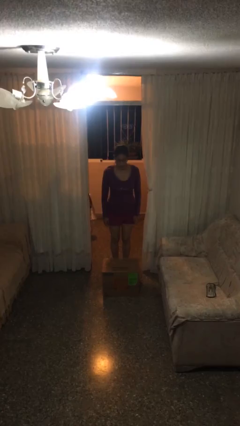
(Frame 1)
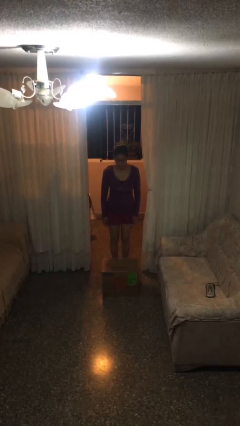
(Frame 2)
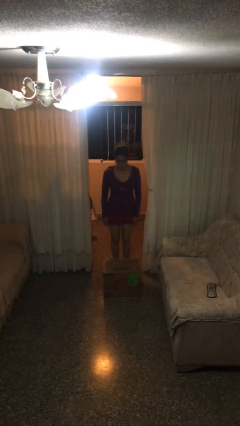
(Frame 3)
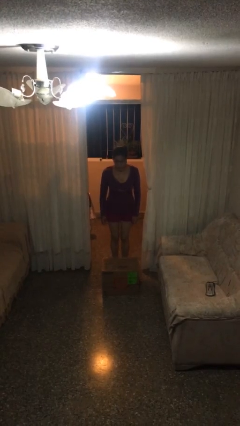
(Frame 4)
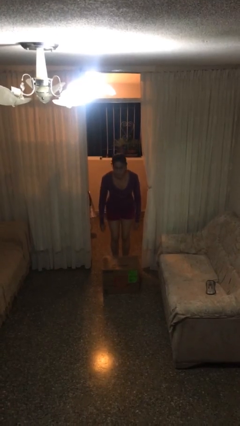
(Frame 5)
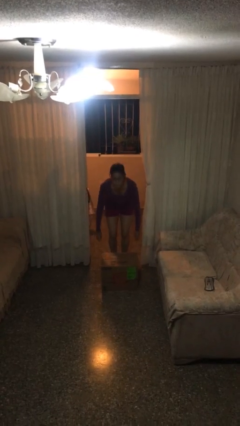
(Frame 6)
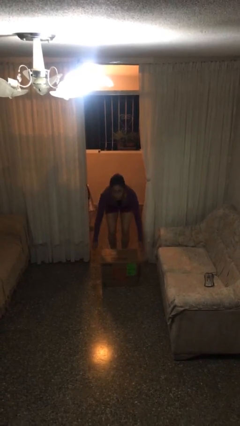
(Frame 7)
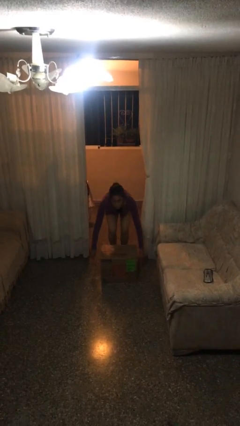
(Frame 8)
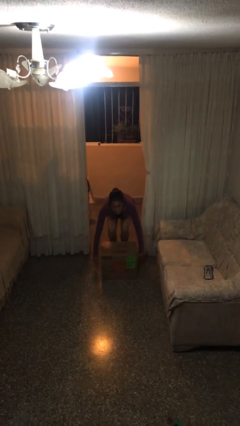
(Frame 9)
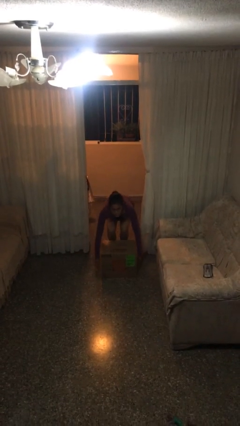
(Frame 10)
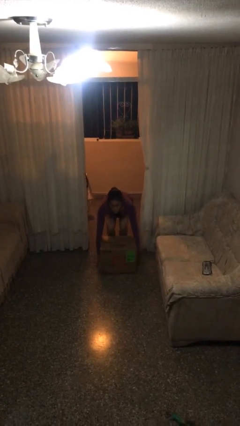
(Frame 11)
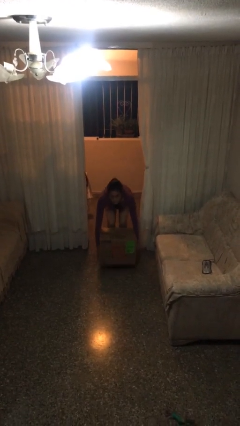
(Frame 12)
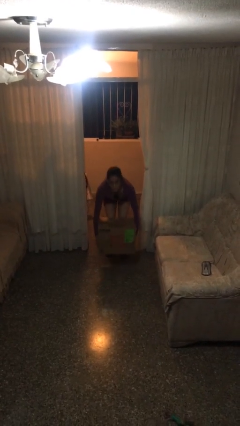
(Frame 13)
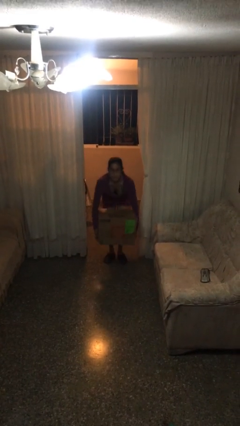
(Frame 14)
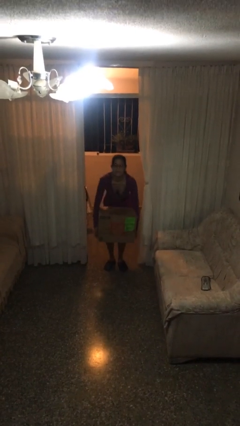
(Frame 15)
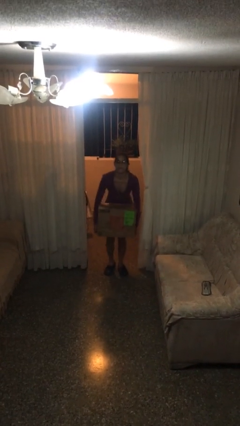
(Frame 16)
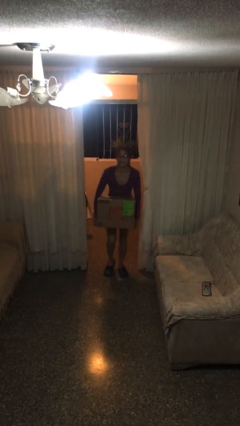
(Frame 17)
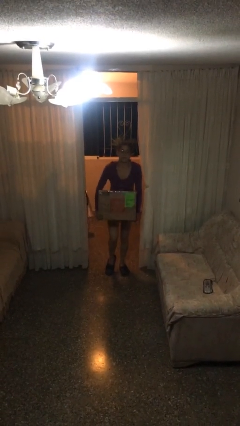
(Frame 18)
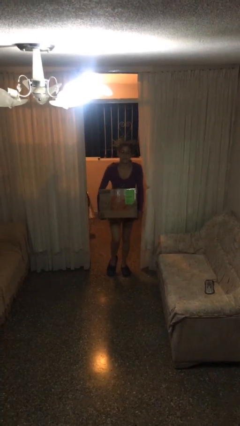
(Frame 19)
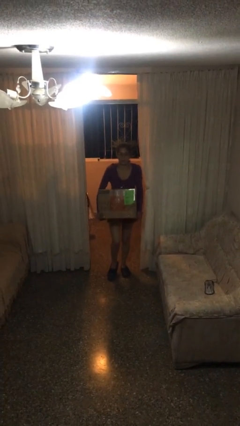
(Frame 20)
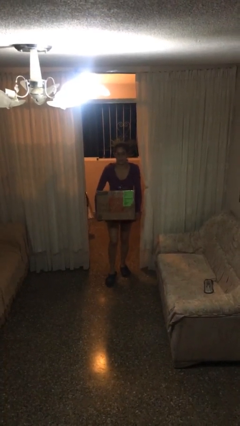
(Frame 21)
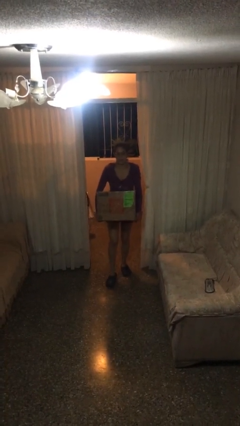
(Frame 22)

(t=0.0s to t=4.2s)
person picks up object from floor

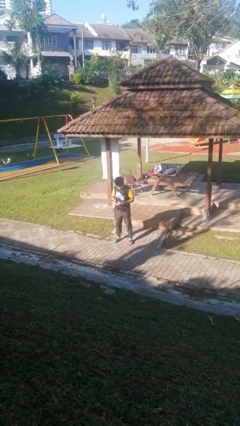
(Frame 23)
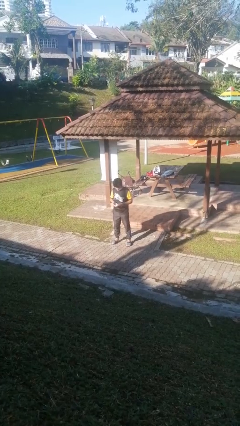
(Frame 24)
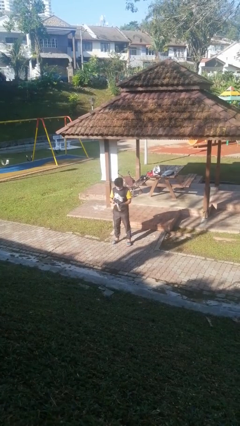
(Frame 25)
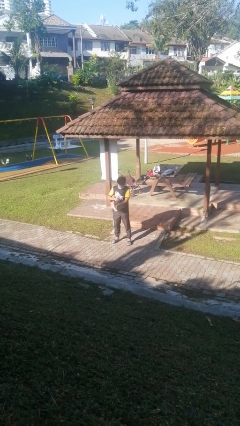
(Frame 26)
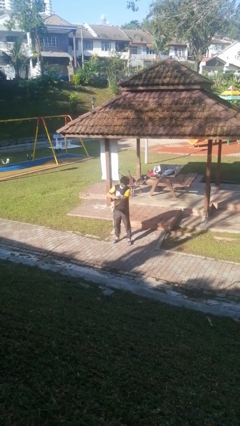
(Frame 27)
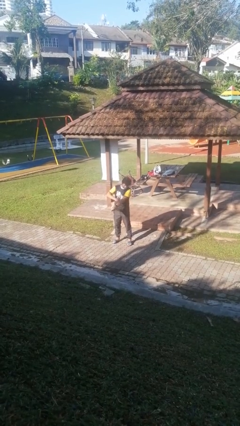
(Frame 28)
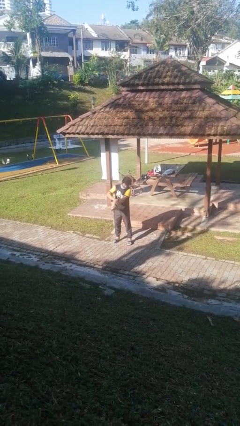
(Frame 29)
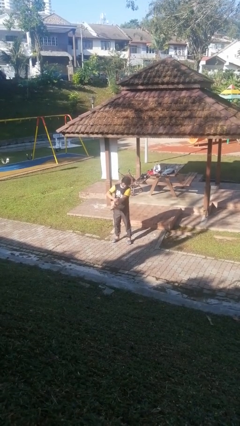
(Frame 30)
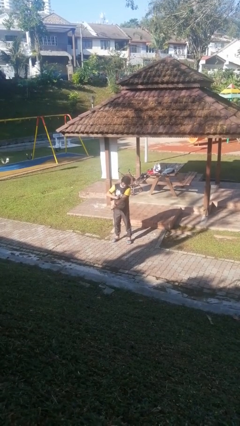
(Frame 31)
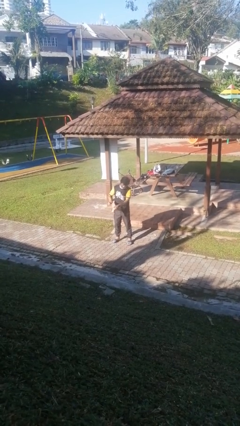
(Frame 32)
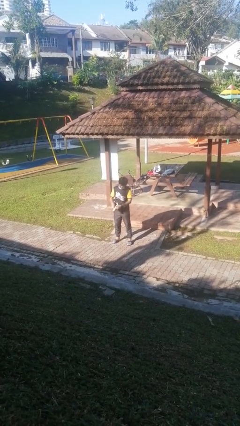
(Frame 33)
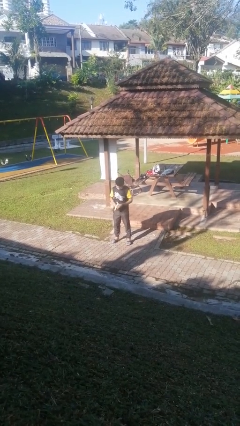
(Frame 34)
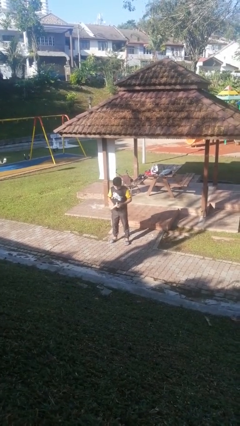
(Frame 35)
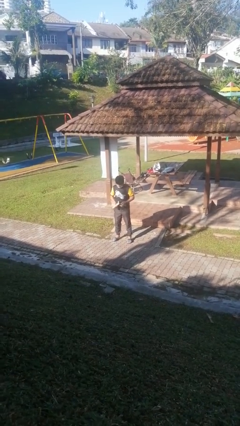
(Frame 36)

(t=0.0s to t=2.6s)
person applies sunscreen

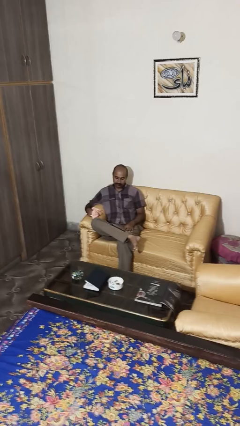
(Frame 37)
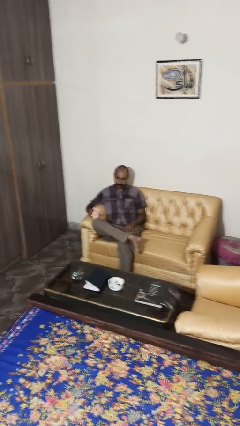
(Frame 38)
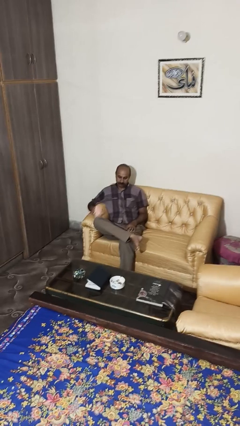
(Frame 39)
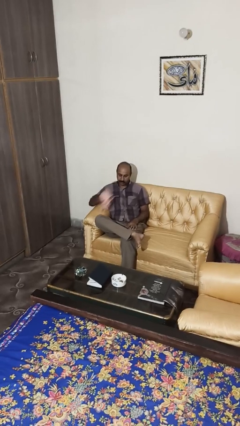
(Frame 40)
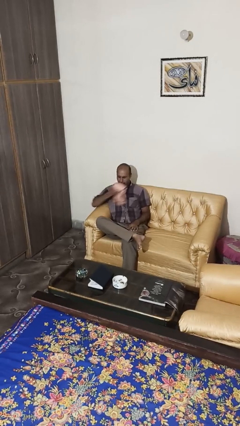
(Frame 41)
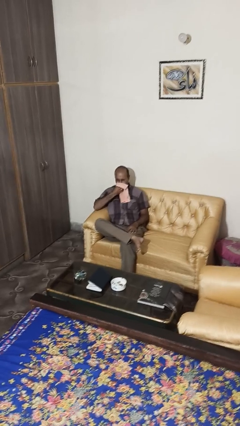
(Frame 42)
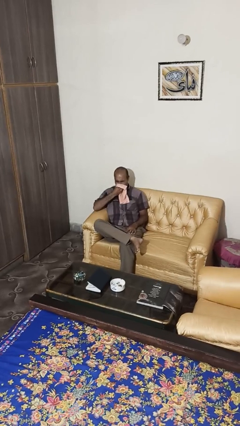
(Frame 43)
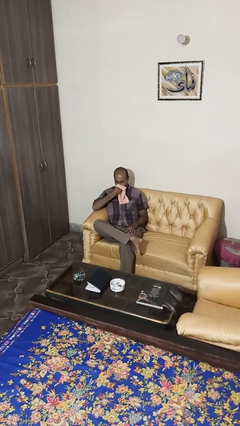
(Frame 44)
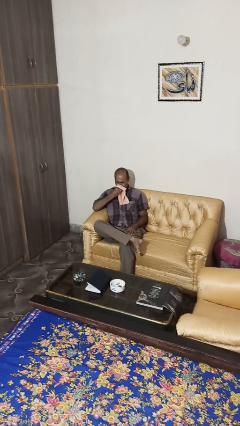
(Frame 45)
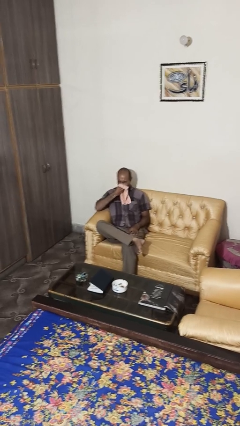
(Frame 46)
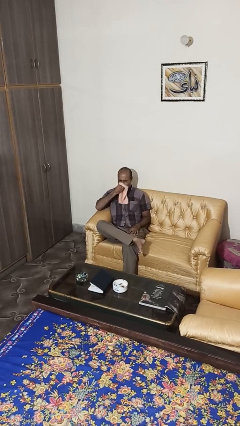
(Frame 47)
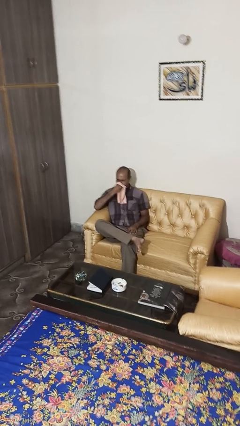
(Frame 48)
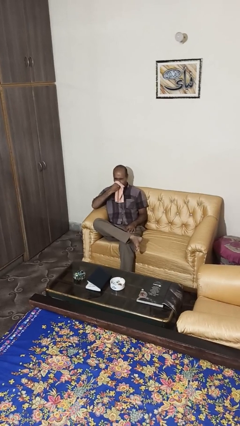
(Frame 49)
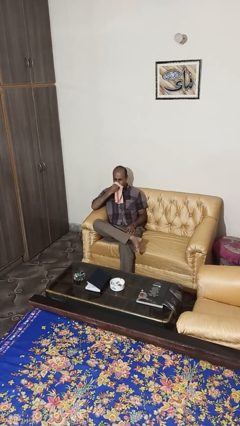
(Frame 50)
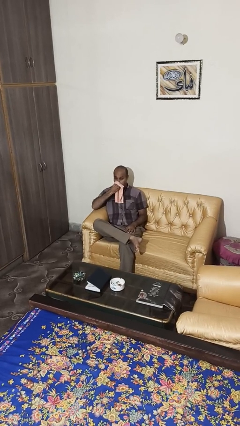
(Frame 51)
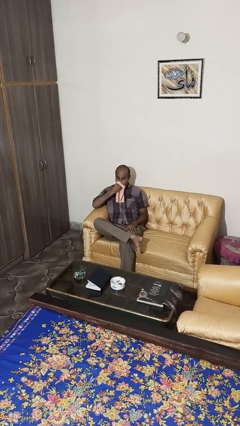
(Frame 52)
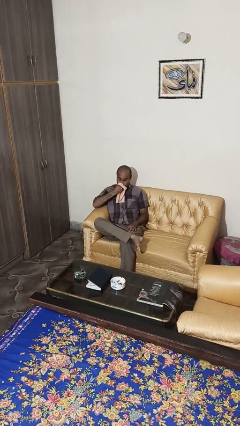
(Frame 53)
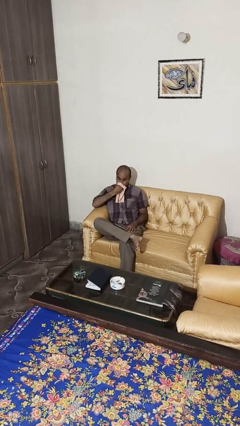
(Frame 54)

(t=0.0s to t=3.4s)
person blows nose

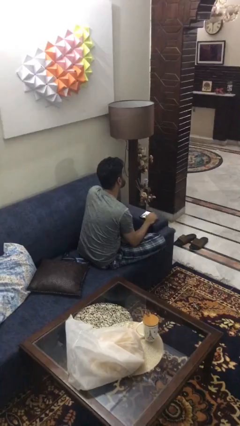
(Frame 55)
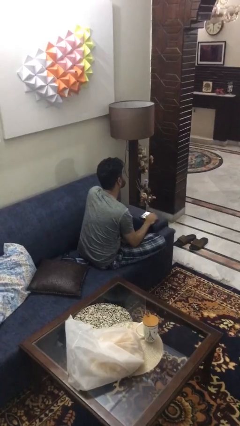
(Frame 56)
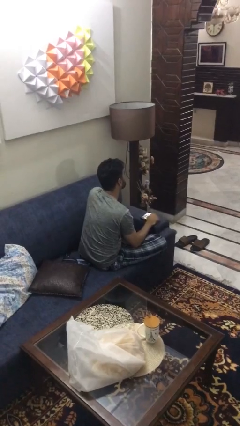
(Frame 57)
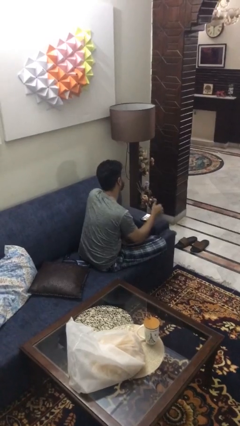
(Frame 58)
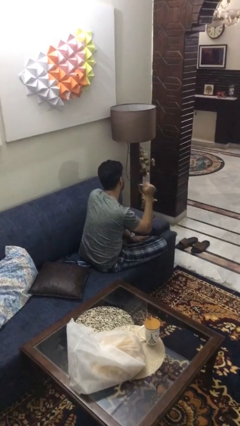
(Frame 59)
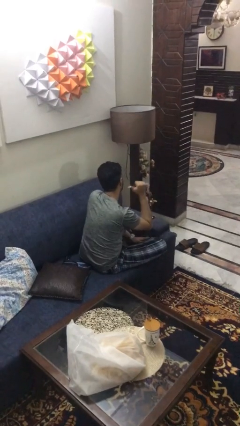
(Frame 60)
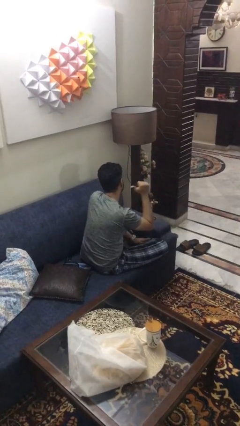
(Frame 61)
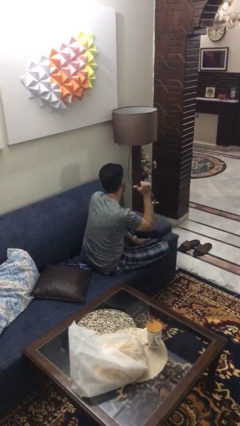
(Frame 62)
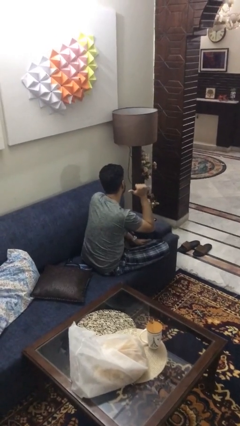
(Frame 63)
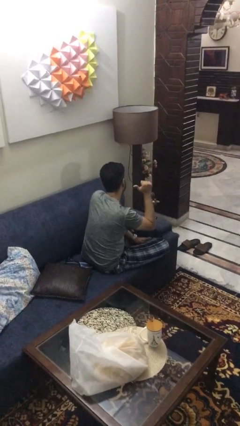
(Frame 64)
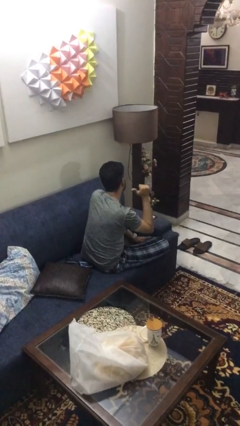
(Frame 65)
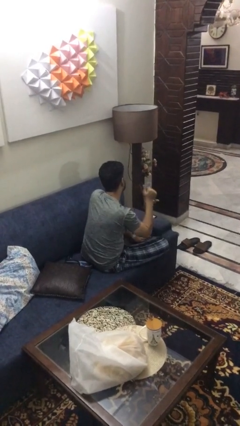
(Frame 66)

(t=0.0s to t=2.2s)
person gestures behind me

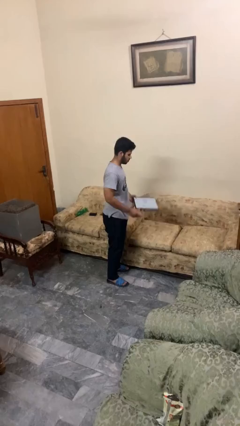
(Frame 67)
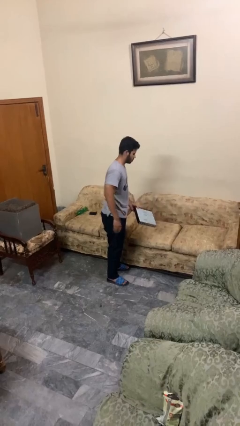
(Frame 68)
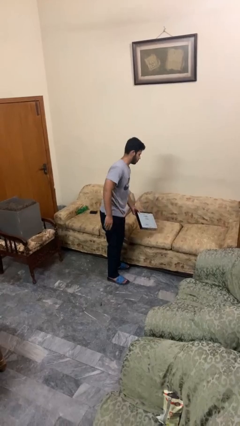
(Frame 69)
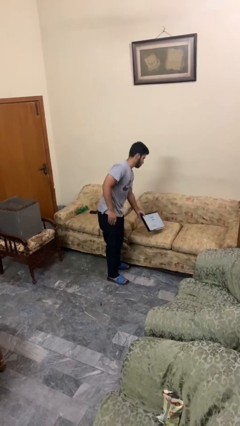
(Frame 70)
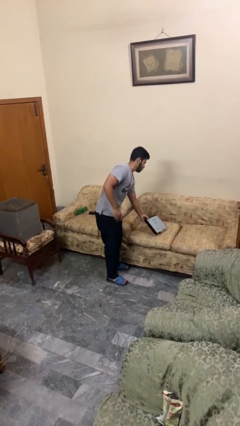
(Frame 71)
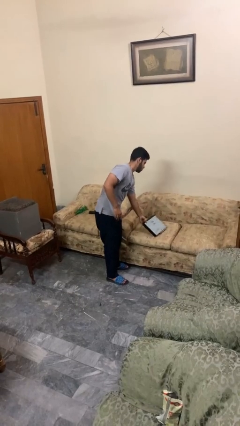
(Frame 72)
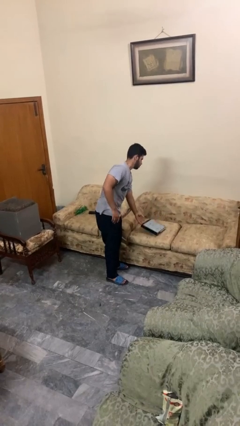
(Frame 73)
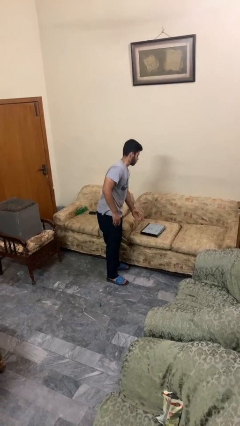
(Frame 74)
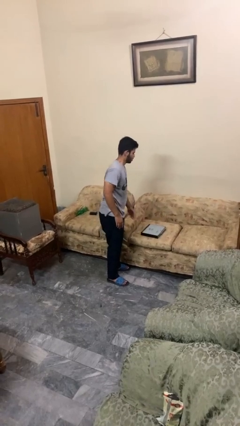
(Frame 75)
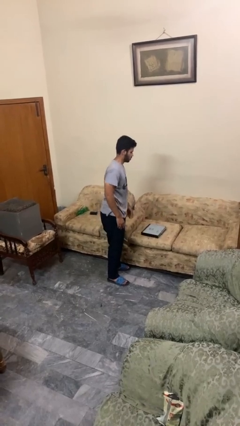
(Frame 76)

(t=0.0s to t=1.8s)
person puts down object on couch

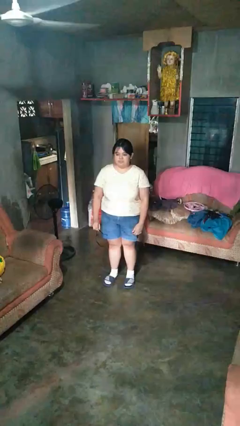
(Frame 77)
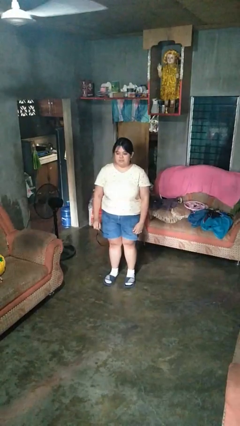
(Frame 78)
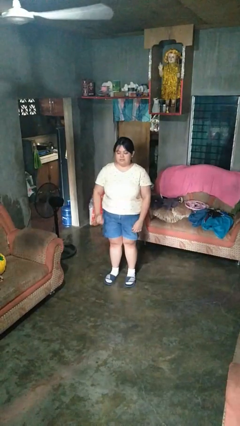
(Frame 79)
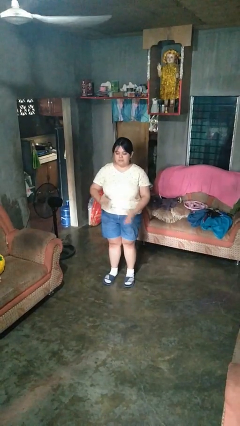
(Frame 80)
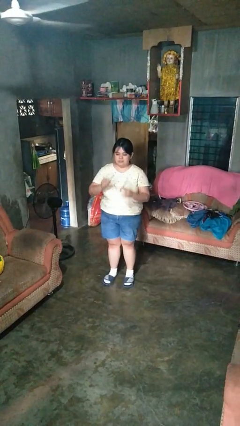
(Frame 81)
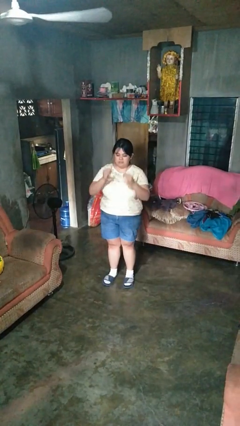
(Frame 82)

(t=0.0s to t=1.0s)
person puts on glasses

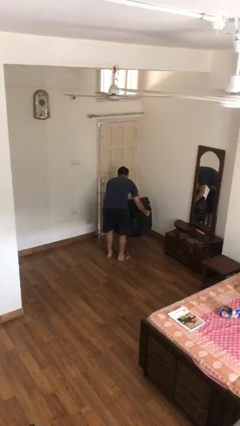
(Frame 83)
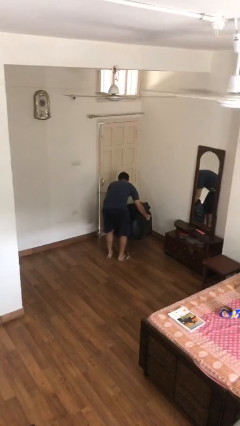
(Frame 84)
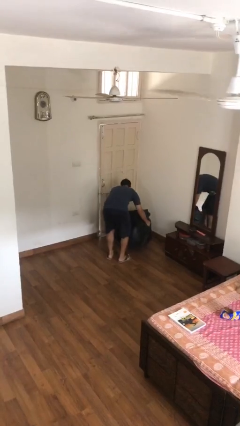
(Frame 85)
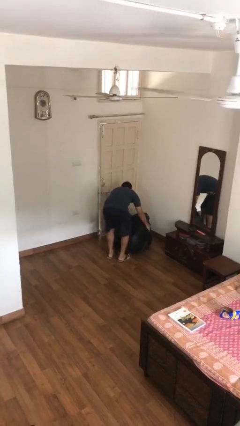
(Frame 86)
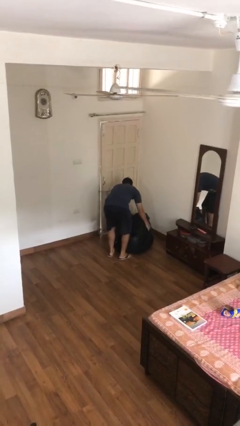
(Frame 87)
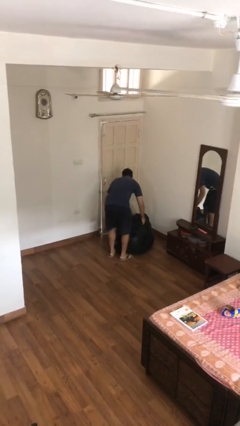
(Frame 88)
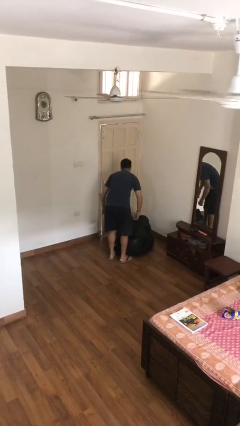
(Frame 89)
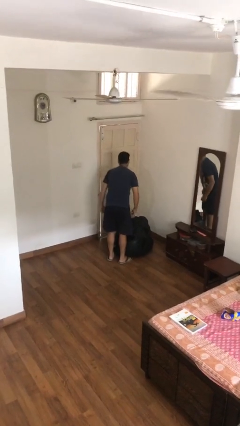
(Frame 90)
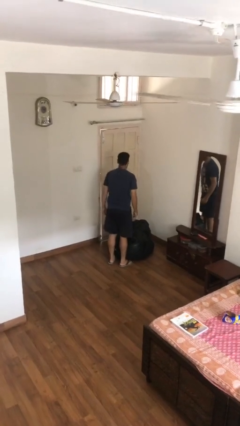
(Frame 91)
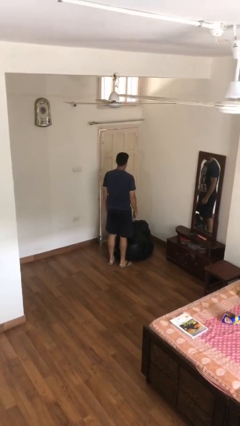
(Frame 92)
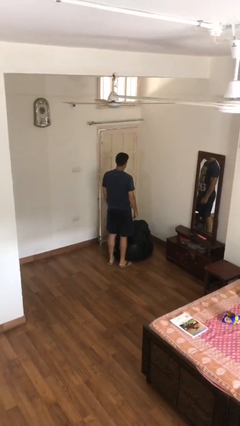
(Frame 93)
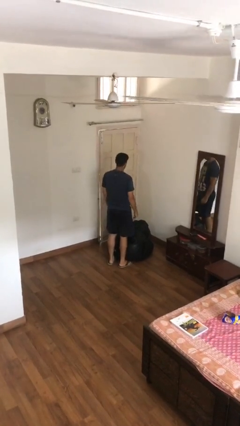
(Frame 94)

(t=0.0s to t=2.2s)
person puts down object on floor
